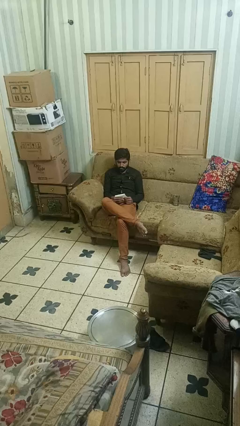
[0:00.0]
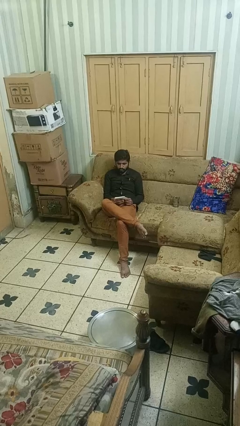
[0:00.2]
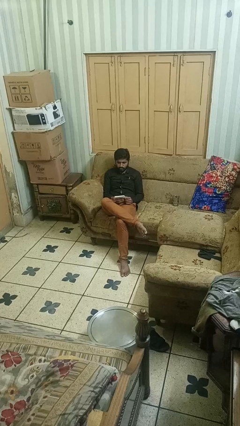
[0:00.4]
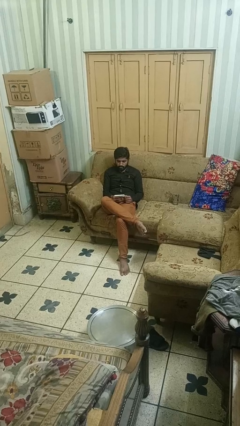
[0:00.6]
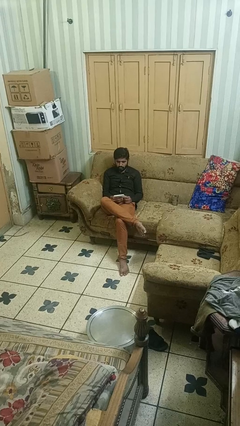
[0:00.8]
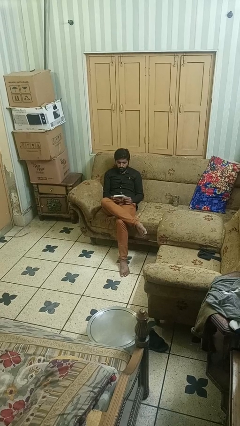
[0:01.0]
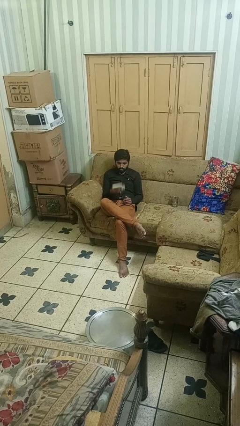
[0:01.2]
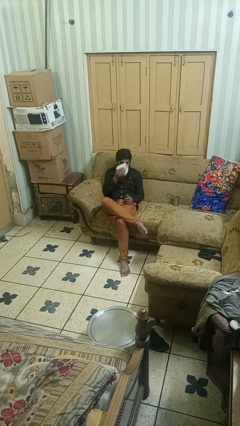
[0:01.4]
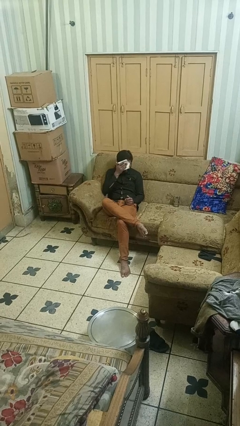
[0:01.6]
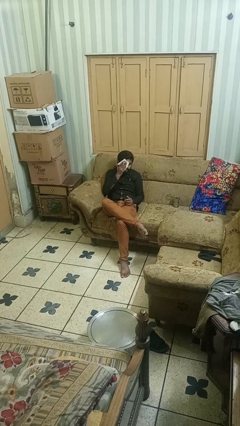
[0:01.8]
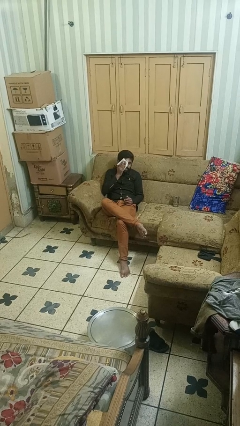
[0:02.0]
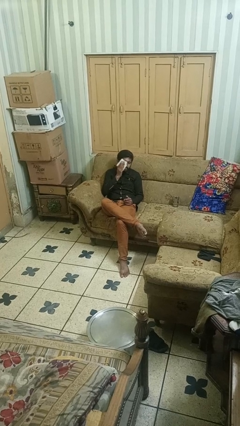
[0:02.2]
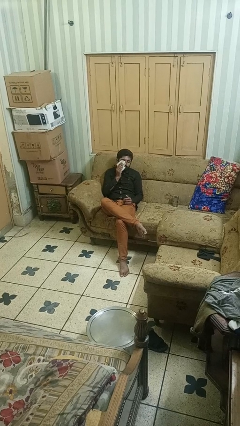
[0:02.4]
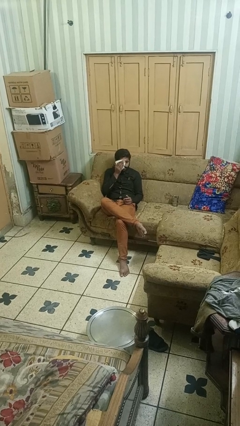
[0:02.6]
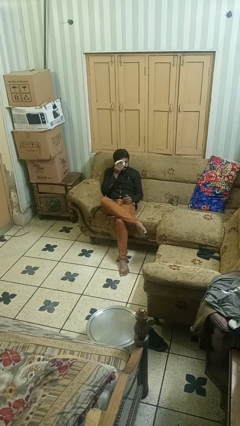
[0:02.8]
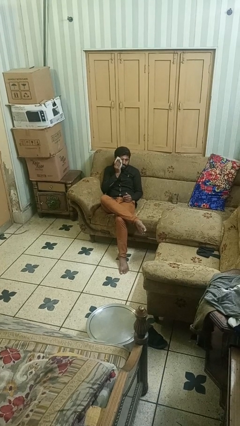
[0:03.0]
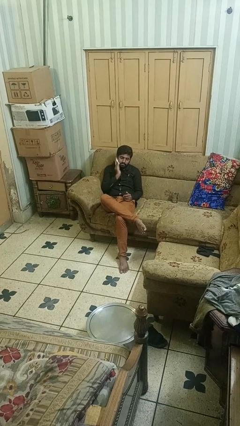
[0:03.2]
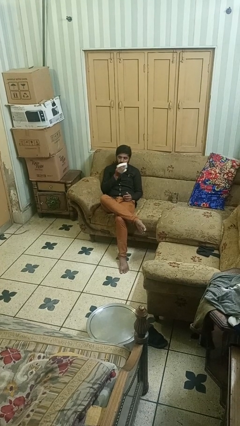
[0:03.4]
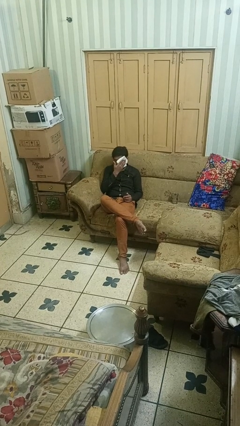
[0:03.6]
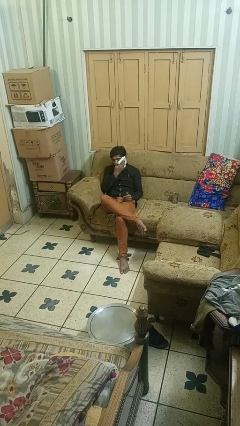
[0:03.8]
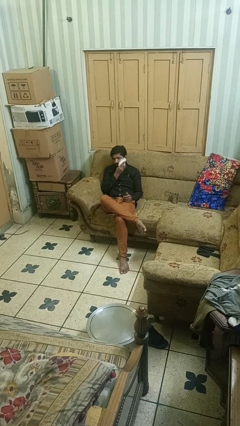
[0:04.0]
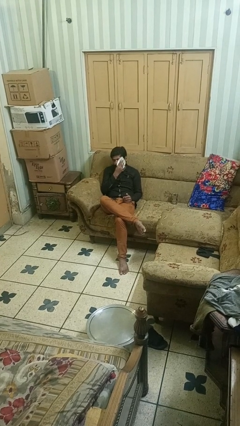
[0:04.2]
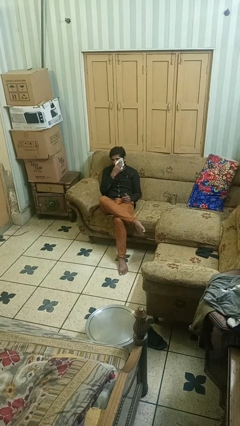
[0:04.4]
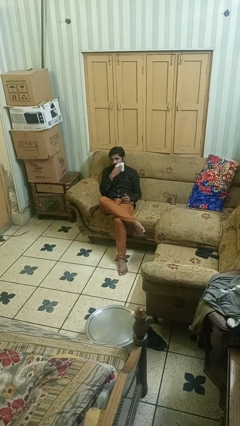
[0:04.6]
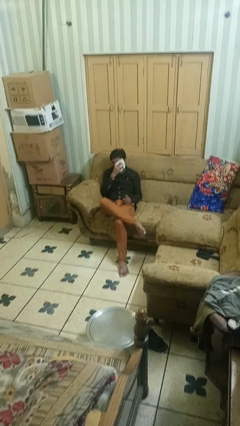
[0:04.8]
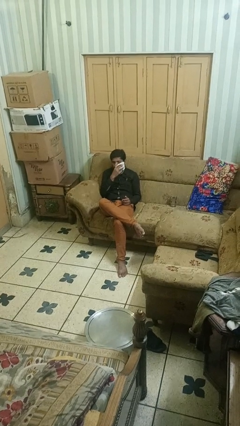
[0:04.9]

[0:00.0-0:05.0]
person wipes mouth with napkin

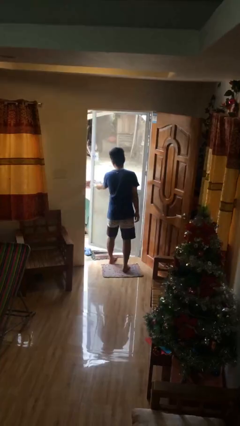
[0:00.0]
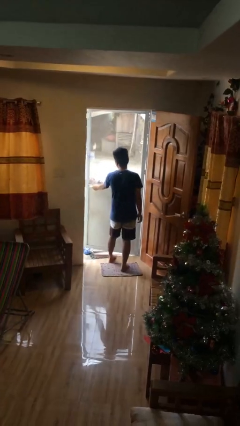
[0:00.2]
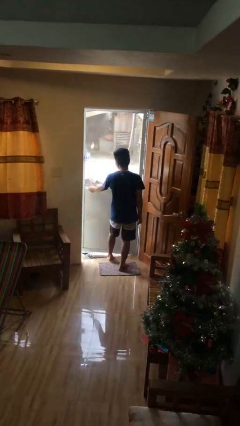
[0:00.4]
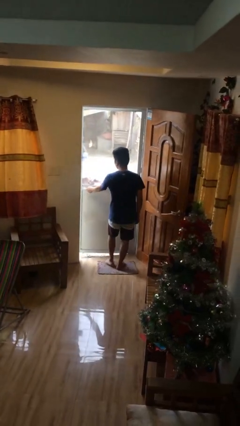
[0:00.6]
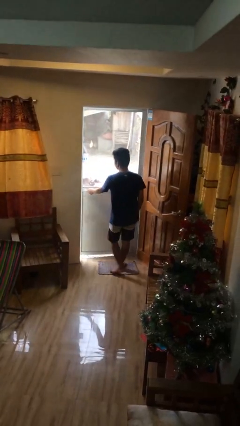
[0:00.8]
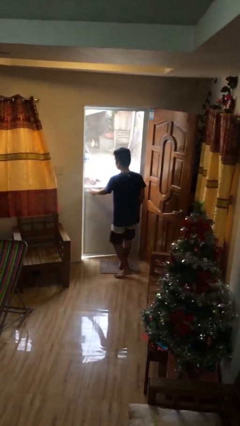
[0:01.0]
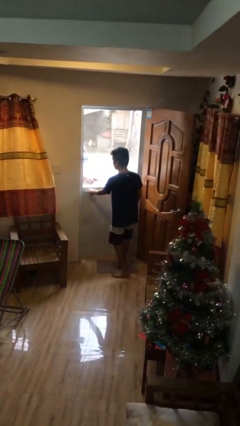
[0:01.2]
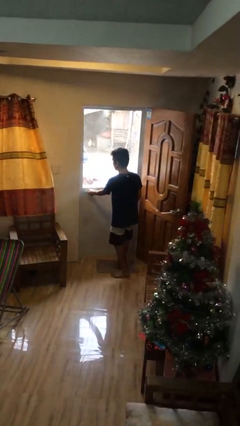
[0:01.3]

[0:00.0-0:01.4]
person closes facility door

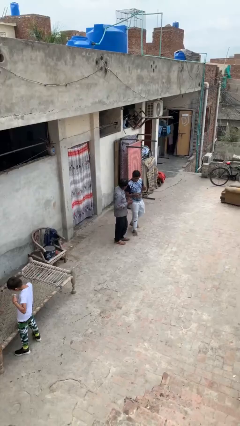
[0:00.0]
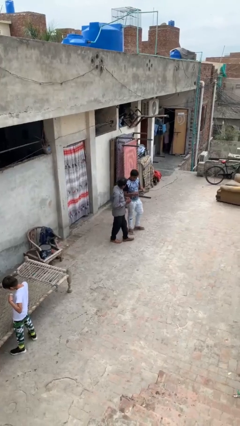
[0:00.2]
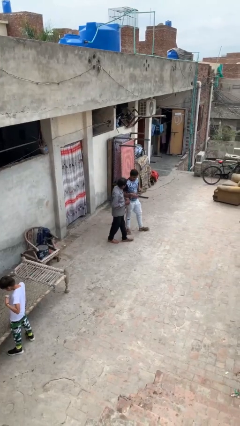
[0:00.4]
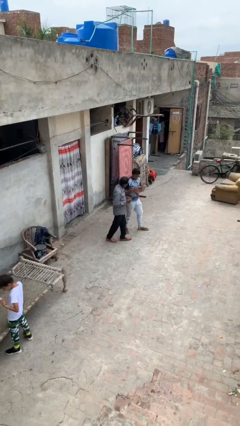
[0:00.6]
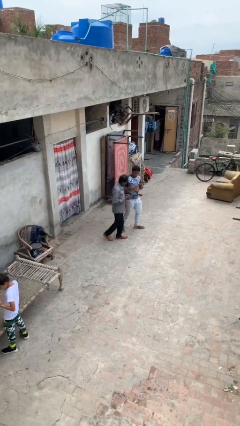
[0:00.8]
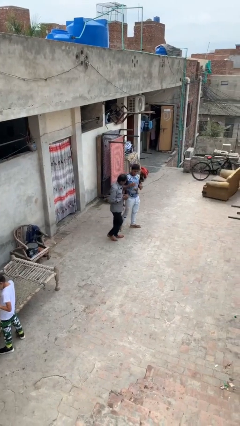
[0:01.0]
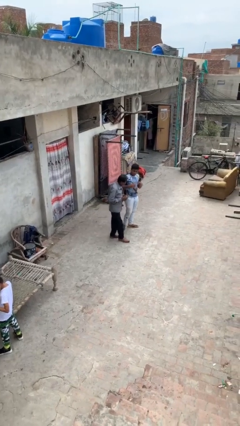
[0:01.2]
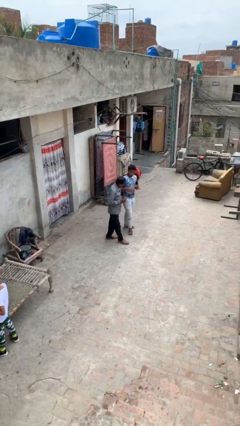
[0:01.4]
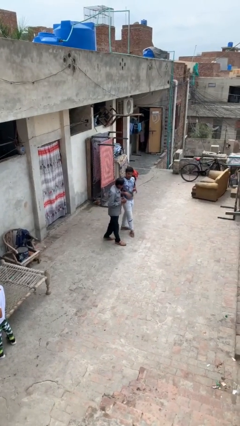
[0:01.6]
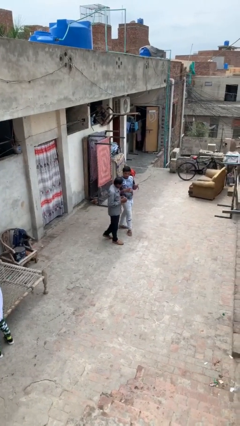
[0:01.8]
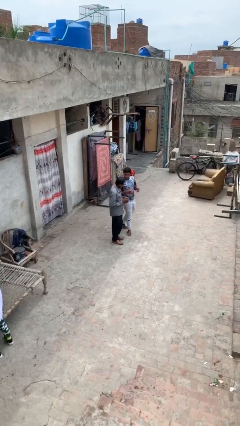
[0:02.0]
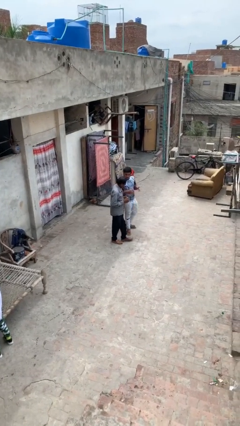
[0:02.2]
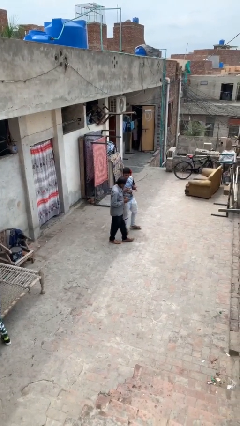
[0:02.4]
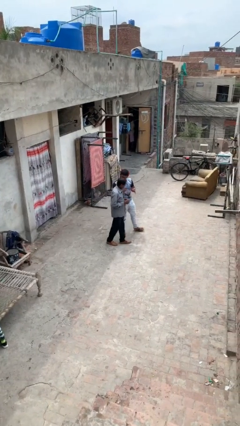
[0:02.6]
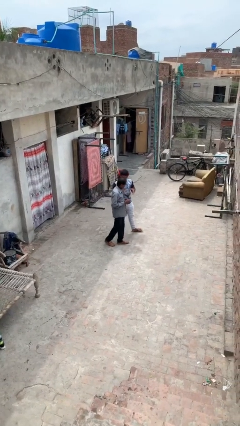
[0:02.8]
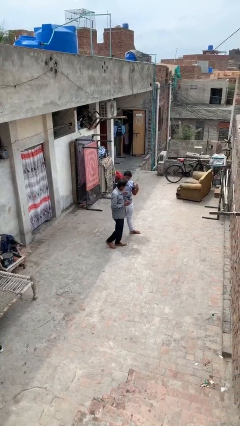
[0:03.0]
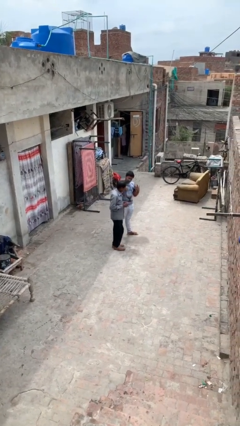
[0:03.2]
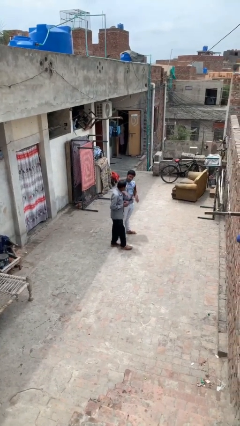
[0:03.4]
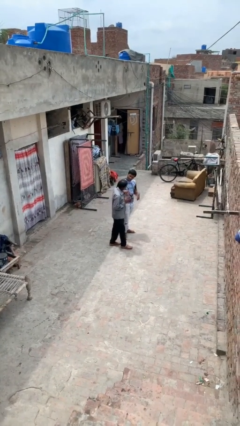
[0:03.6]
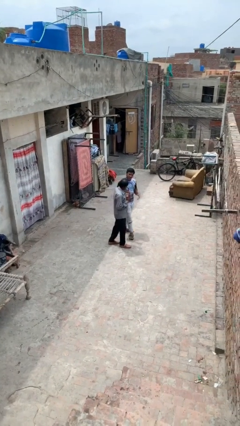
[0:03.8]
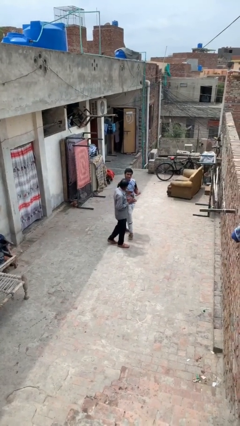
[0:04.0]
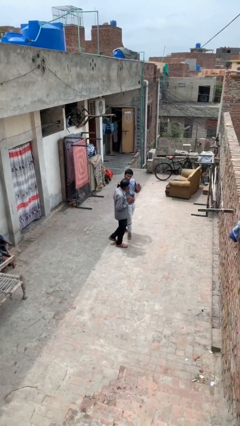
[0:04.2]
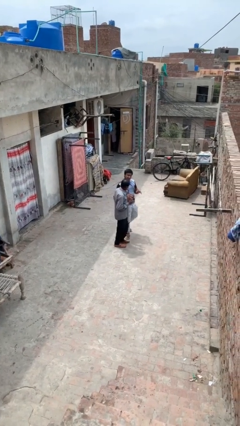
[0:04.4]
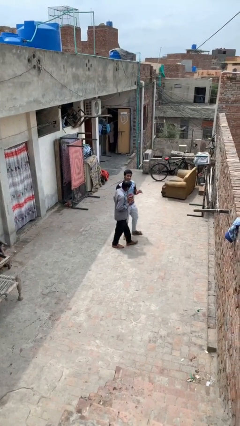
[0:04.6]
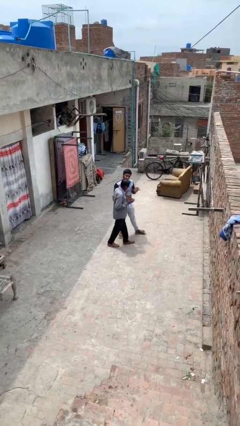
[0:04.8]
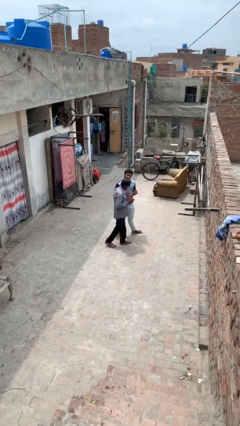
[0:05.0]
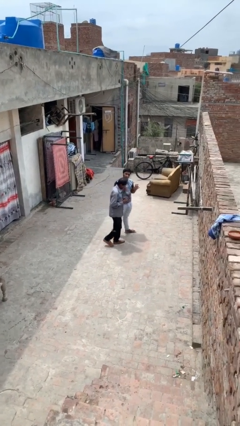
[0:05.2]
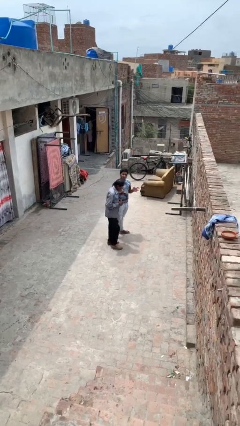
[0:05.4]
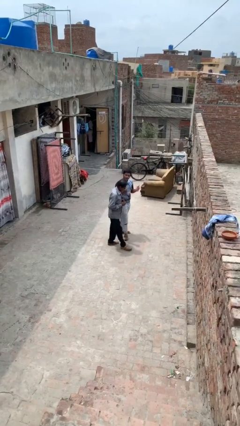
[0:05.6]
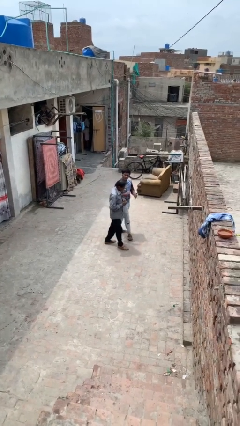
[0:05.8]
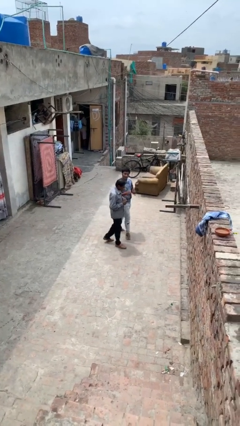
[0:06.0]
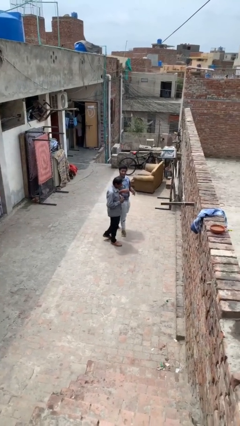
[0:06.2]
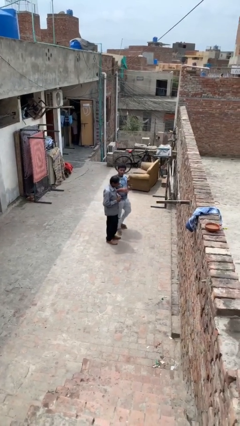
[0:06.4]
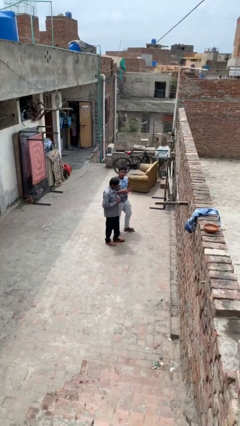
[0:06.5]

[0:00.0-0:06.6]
person talks to person

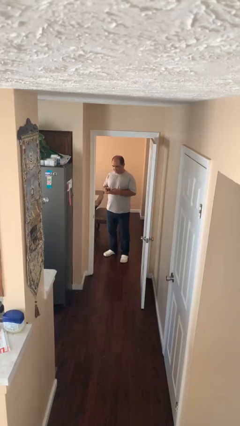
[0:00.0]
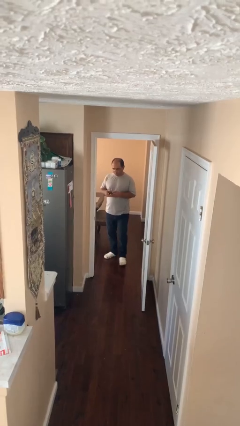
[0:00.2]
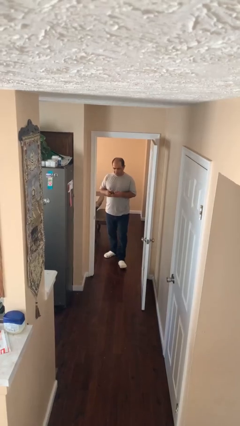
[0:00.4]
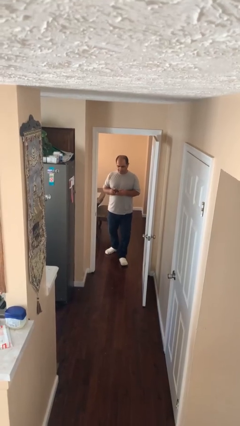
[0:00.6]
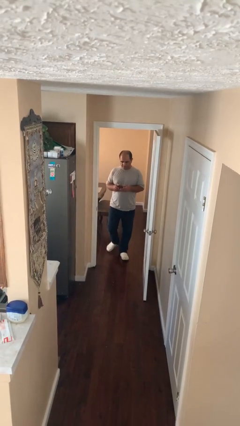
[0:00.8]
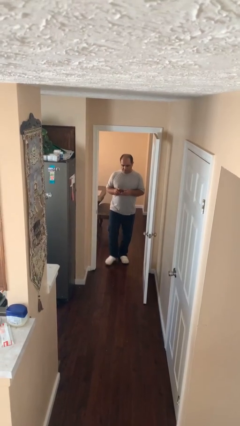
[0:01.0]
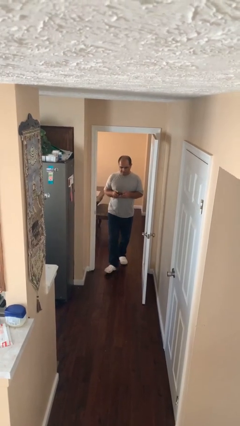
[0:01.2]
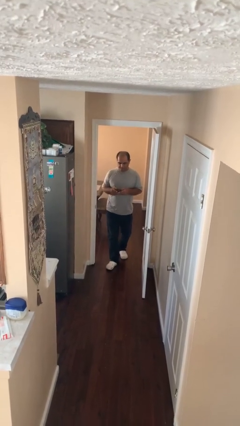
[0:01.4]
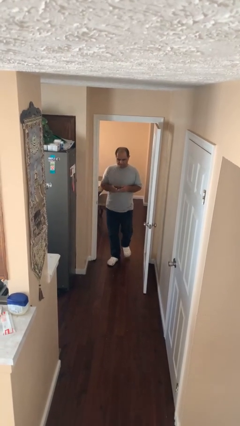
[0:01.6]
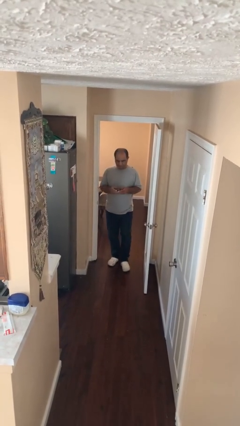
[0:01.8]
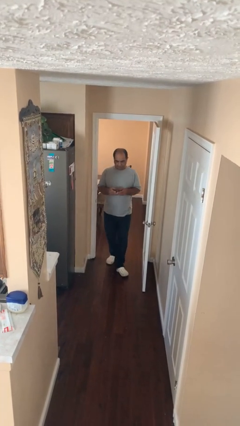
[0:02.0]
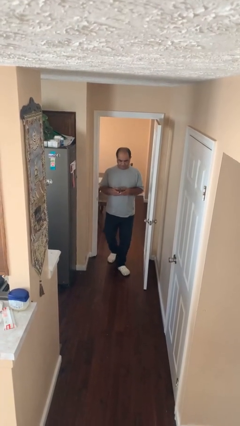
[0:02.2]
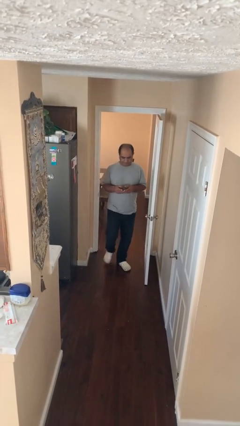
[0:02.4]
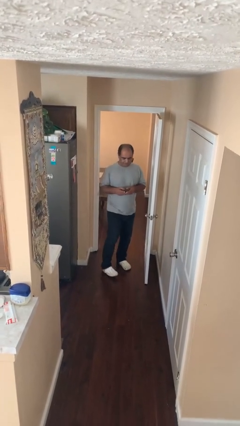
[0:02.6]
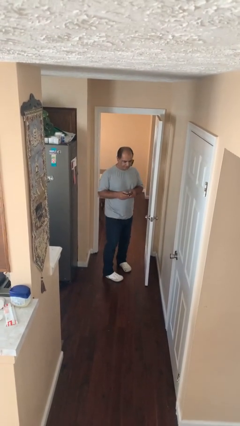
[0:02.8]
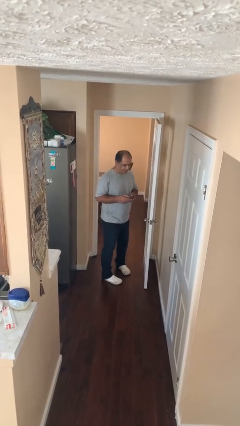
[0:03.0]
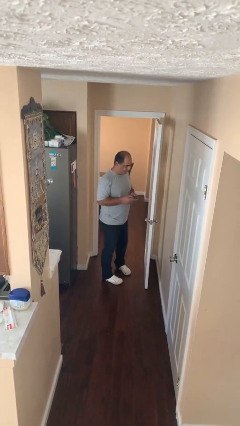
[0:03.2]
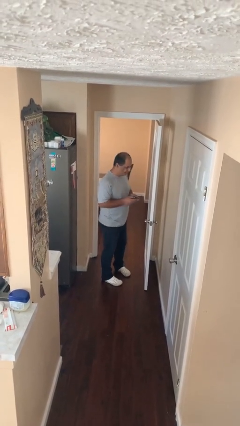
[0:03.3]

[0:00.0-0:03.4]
person enters scene through structure

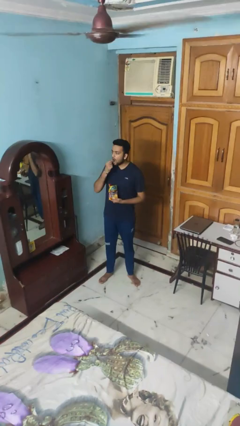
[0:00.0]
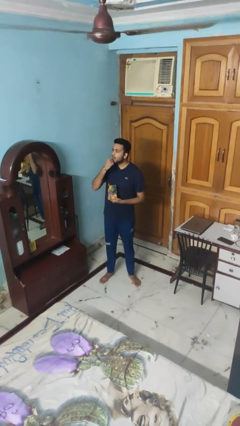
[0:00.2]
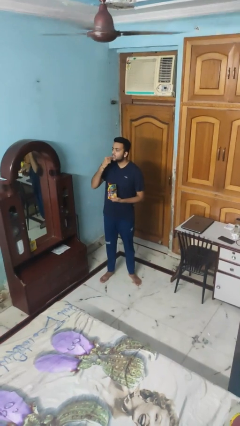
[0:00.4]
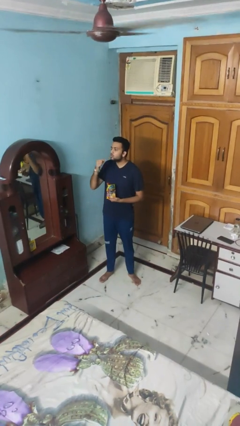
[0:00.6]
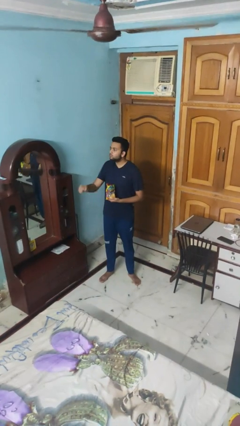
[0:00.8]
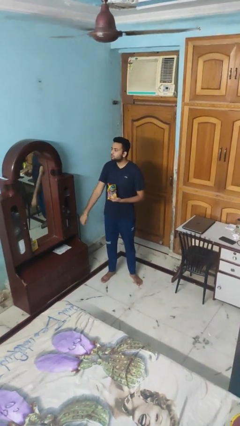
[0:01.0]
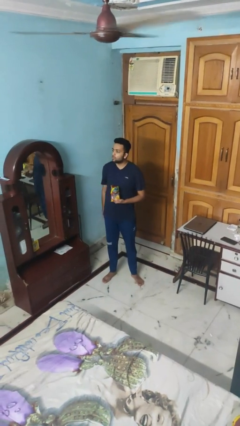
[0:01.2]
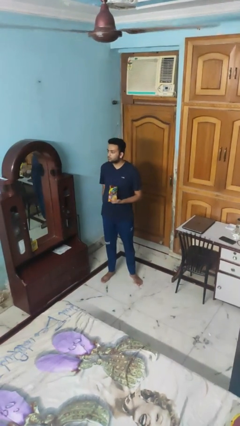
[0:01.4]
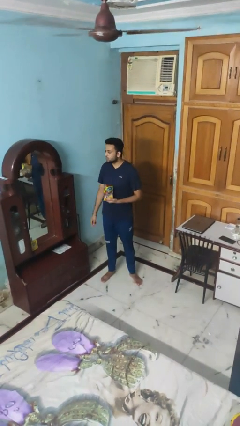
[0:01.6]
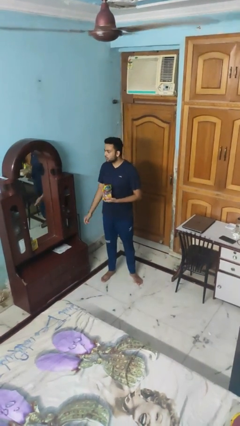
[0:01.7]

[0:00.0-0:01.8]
person eats snack from bag
